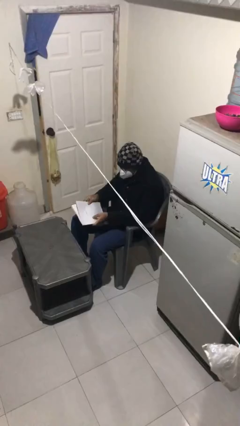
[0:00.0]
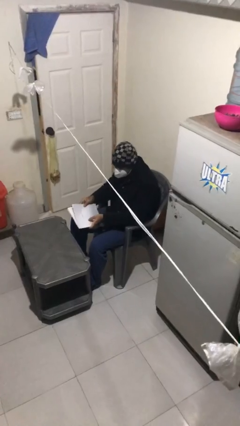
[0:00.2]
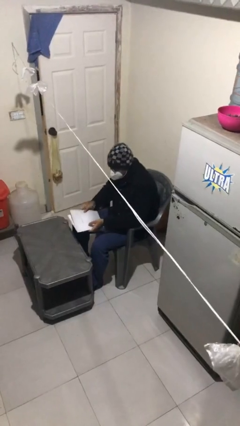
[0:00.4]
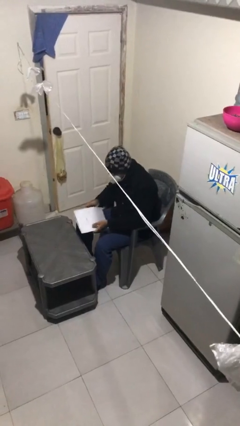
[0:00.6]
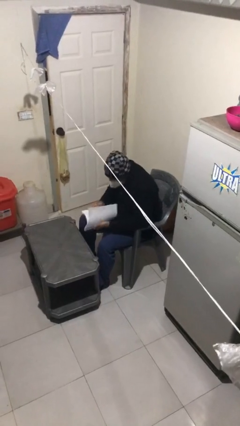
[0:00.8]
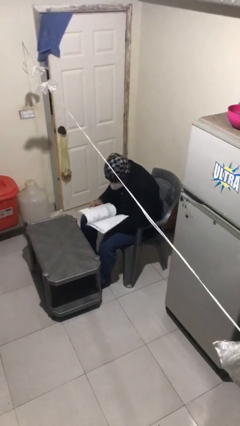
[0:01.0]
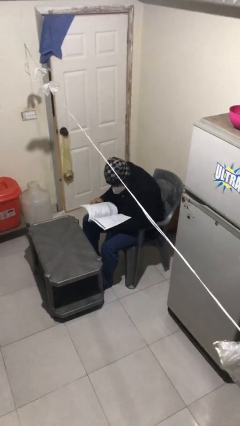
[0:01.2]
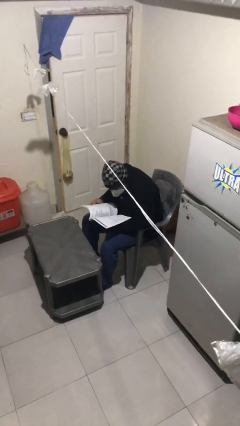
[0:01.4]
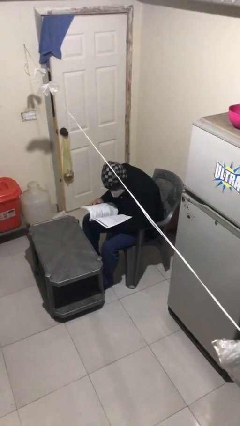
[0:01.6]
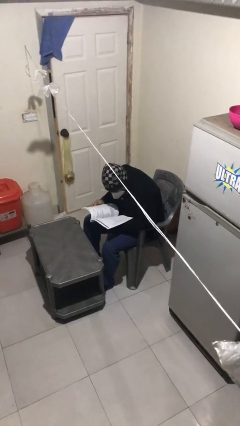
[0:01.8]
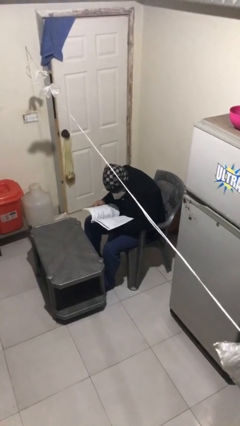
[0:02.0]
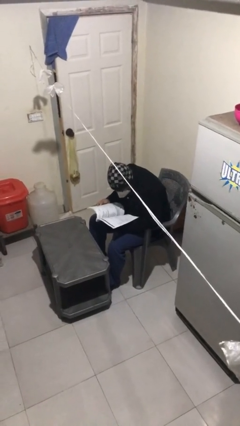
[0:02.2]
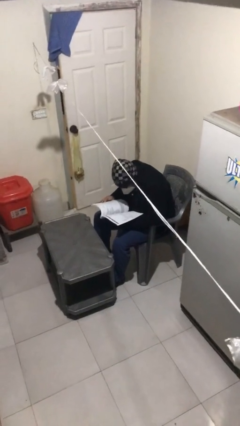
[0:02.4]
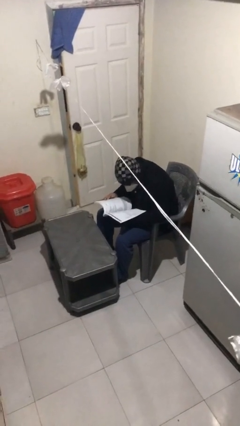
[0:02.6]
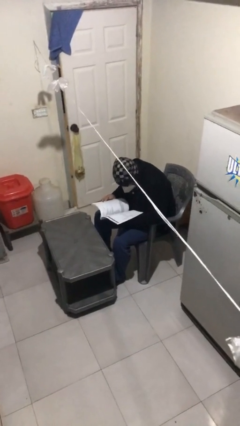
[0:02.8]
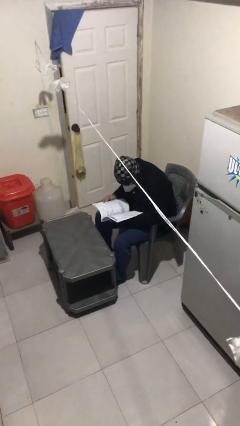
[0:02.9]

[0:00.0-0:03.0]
person reads document

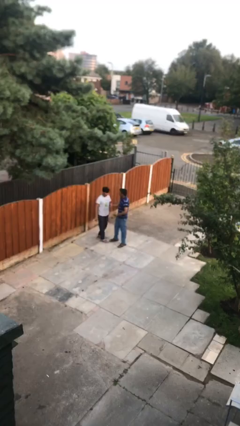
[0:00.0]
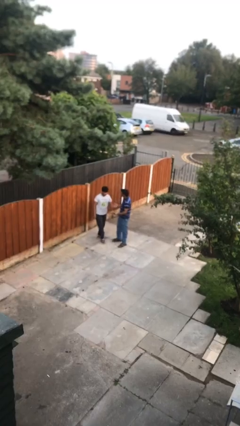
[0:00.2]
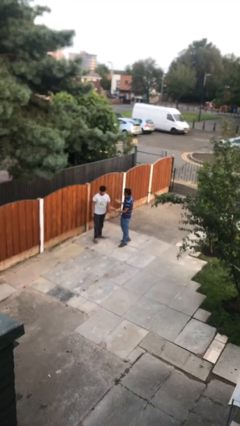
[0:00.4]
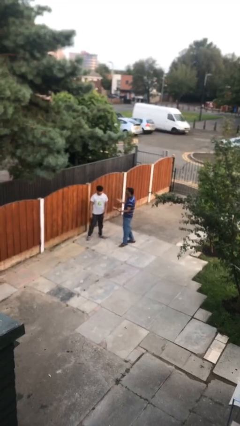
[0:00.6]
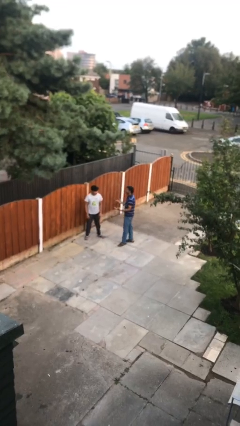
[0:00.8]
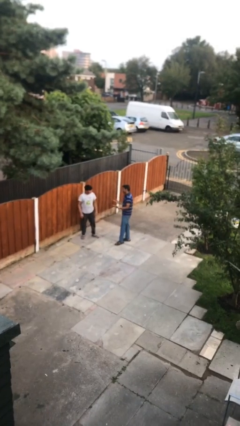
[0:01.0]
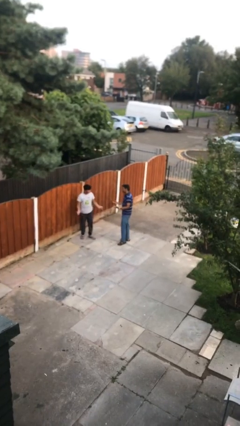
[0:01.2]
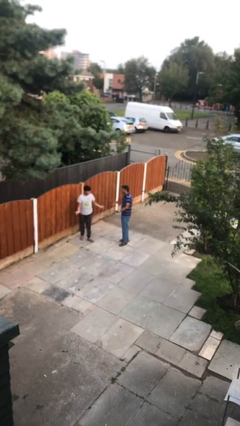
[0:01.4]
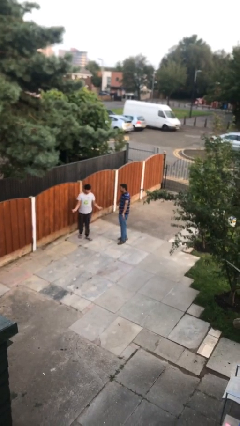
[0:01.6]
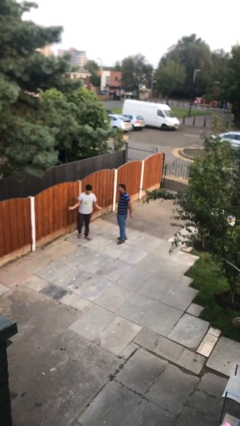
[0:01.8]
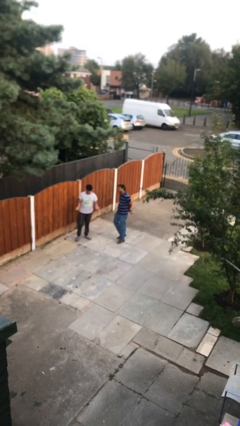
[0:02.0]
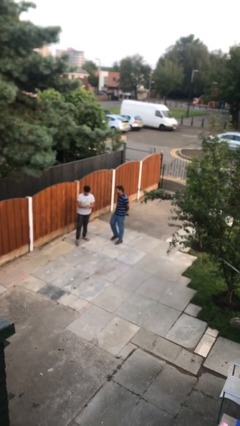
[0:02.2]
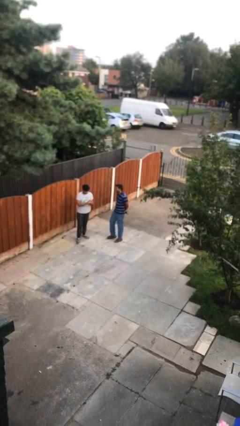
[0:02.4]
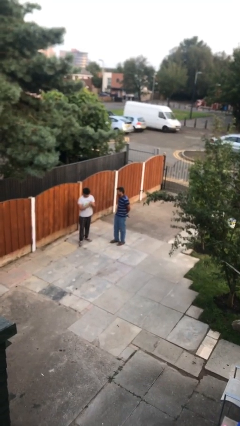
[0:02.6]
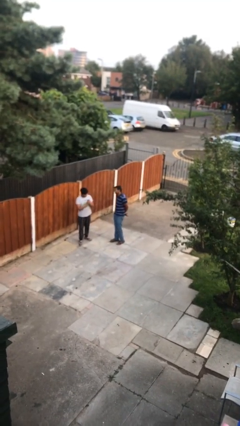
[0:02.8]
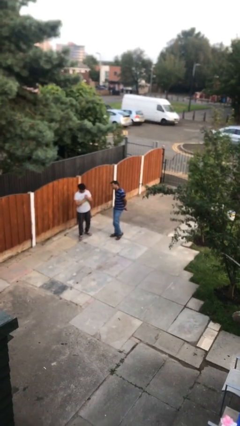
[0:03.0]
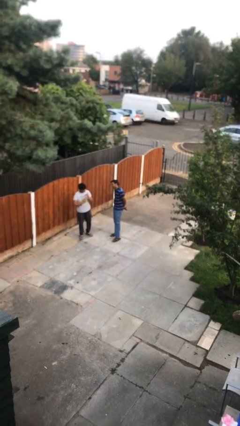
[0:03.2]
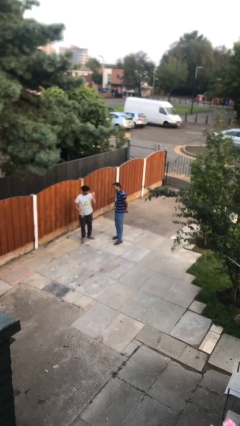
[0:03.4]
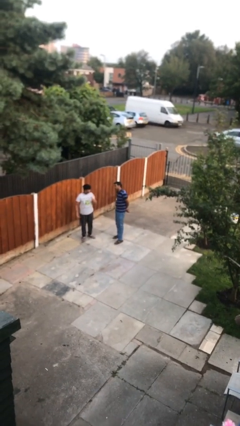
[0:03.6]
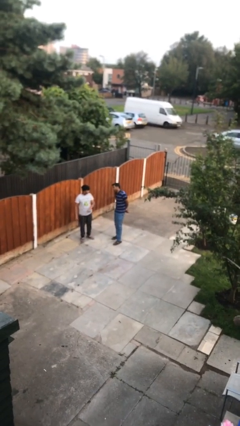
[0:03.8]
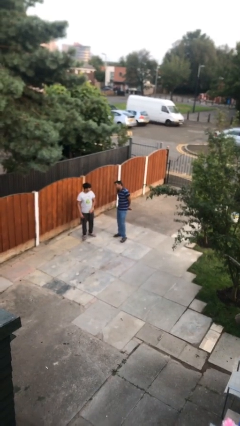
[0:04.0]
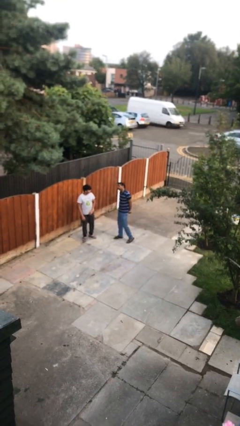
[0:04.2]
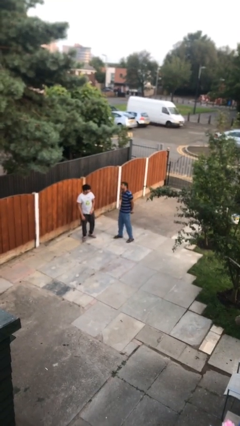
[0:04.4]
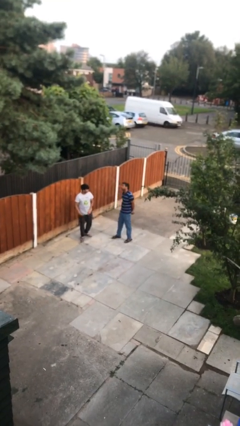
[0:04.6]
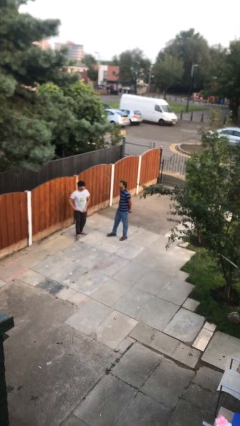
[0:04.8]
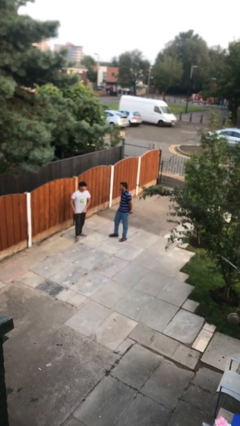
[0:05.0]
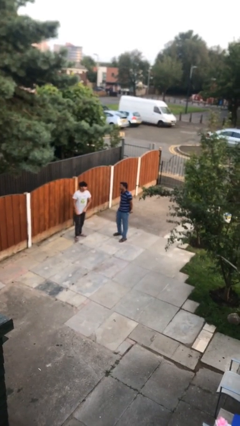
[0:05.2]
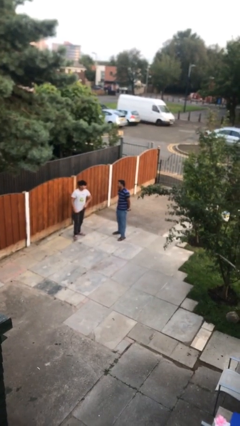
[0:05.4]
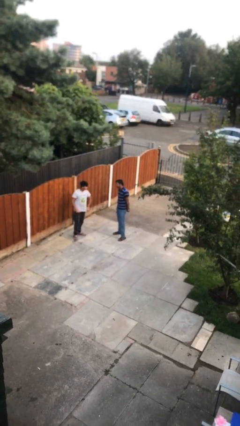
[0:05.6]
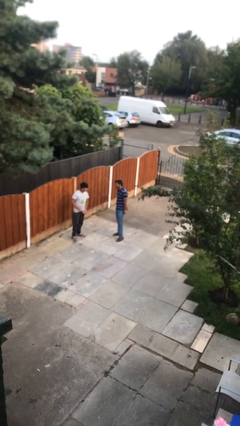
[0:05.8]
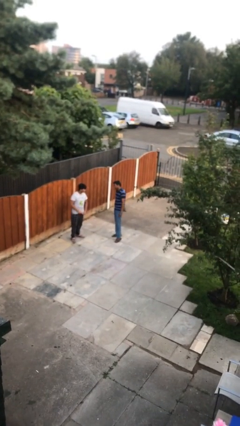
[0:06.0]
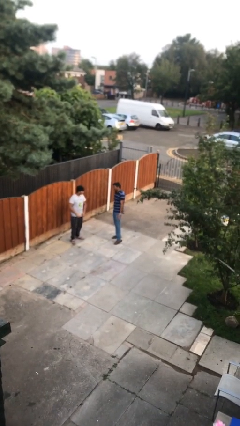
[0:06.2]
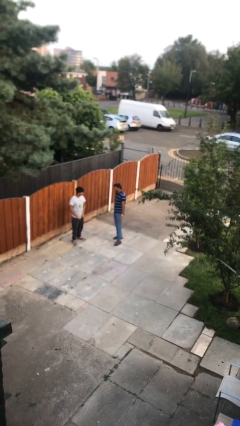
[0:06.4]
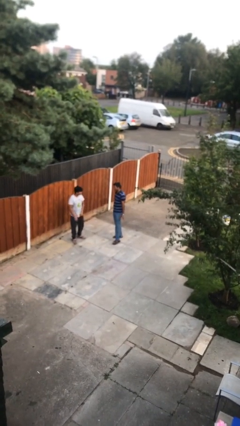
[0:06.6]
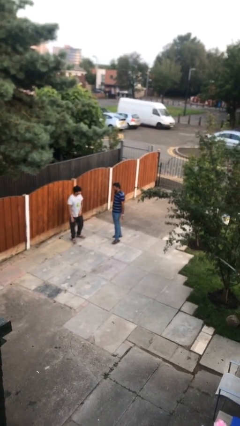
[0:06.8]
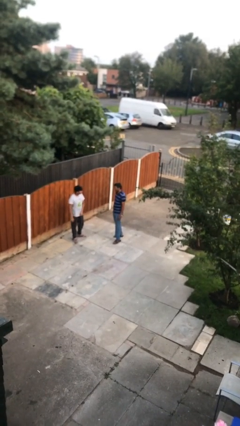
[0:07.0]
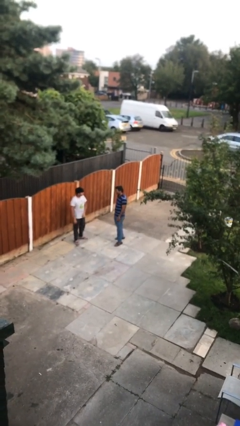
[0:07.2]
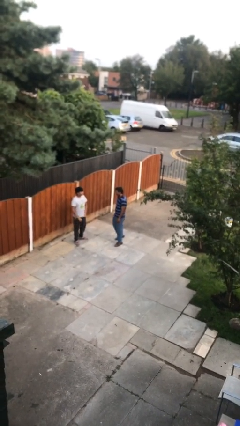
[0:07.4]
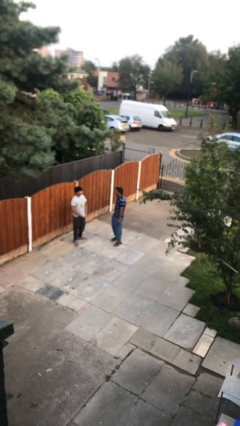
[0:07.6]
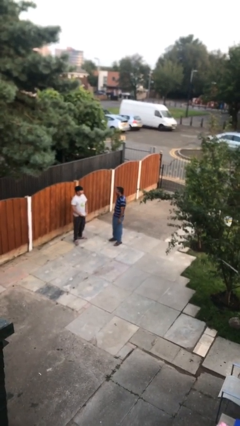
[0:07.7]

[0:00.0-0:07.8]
person talks to person

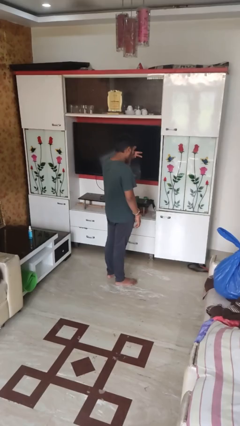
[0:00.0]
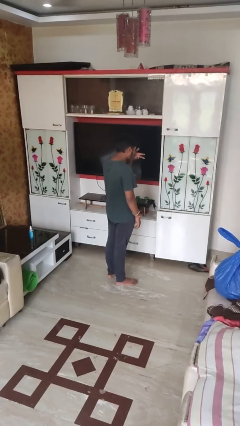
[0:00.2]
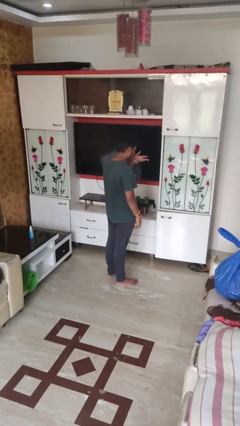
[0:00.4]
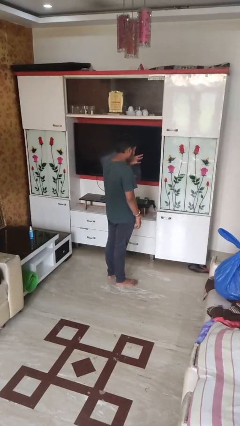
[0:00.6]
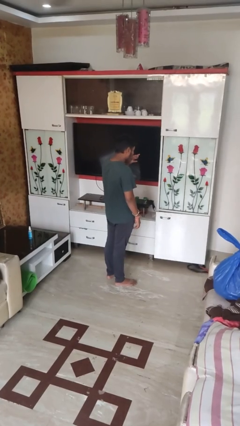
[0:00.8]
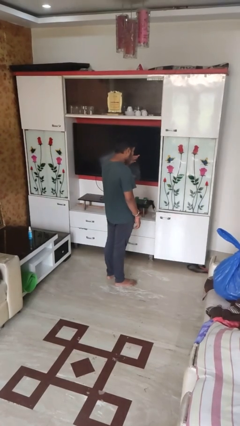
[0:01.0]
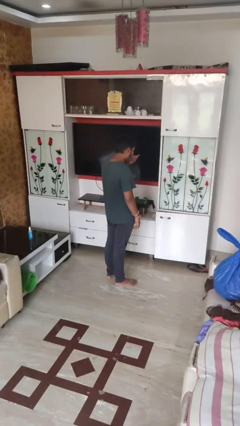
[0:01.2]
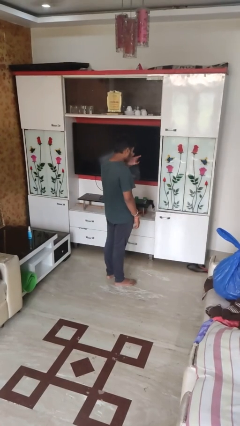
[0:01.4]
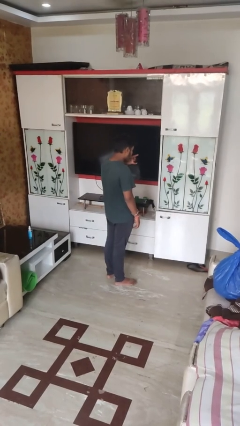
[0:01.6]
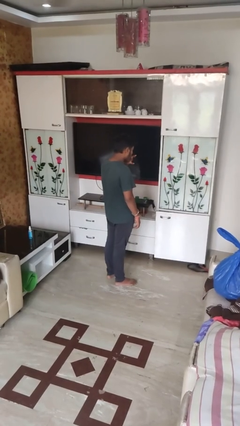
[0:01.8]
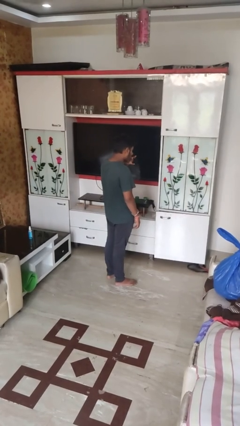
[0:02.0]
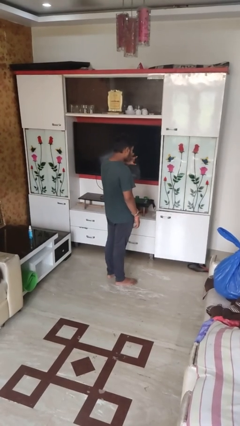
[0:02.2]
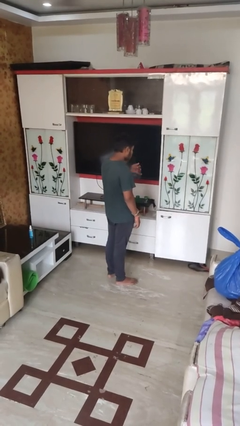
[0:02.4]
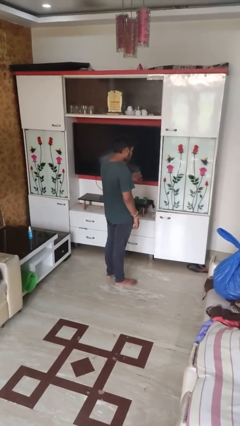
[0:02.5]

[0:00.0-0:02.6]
person licks fingers

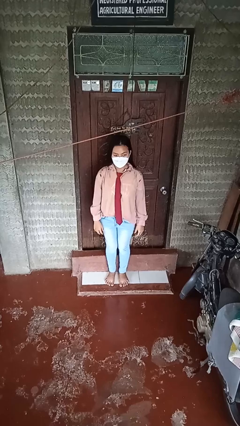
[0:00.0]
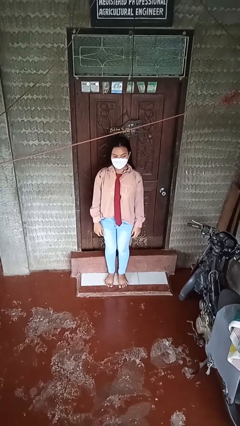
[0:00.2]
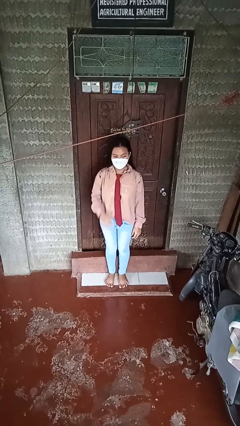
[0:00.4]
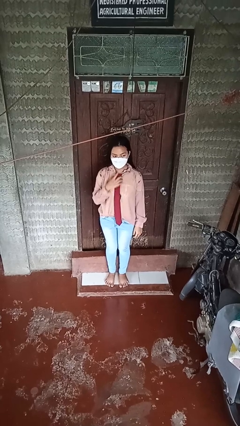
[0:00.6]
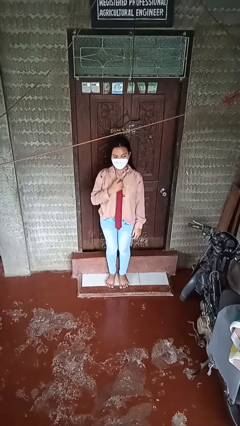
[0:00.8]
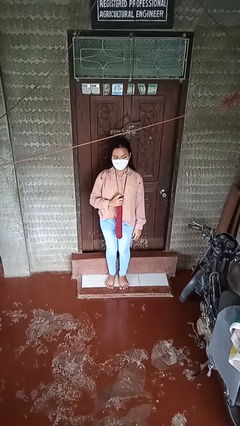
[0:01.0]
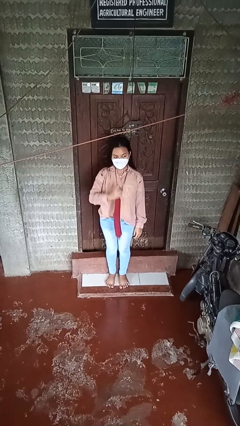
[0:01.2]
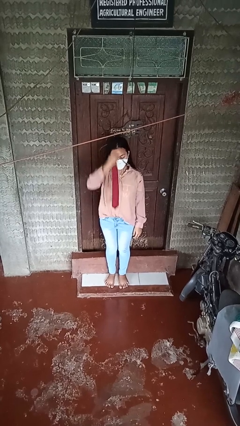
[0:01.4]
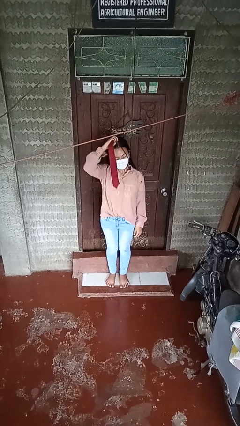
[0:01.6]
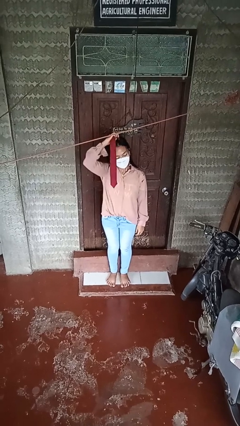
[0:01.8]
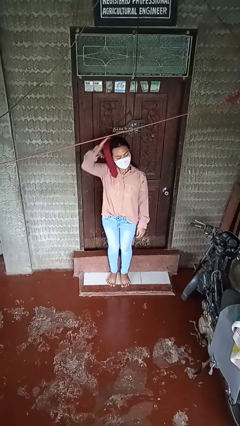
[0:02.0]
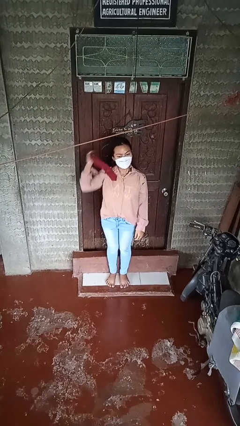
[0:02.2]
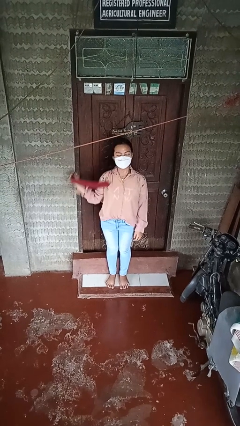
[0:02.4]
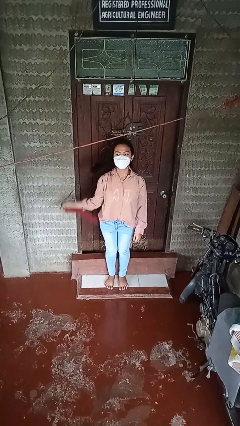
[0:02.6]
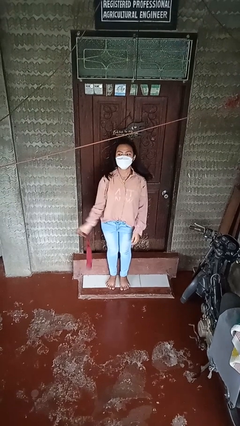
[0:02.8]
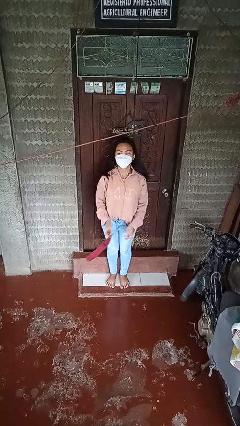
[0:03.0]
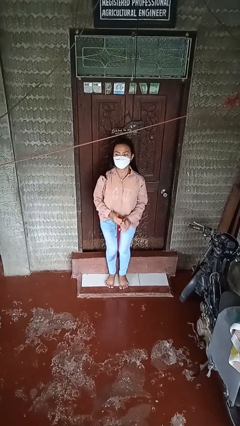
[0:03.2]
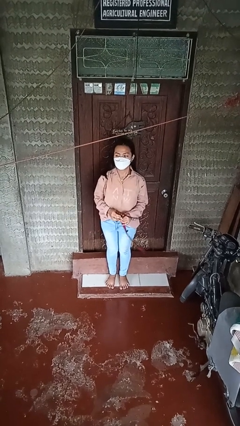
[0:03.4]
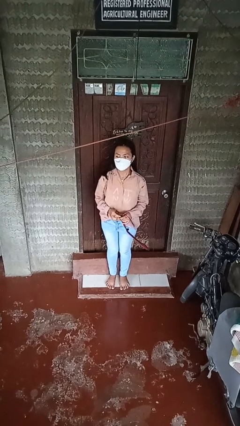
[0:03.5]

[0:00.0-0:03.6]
person takes off necktie

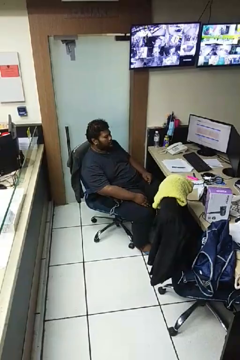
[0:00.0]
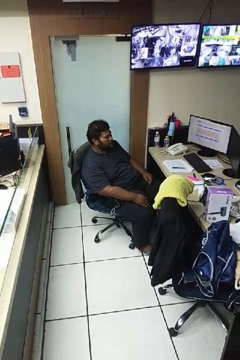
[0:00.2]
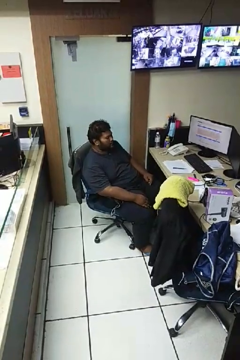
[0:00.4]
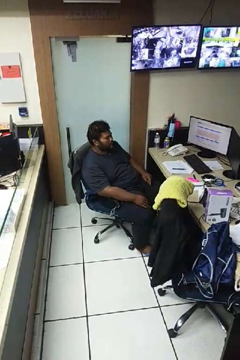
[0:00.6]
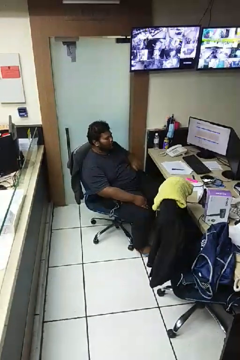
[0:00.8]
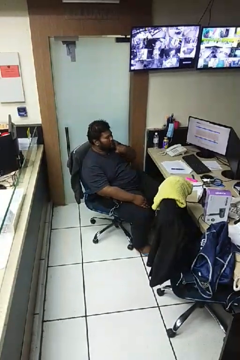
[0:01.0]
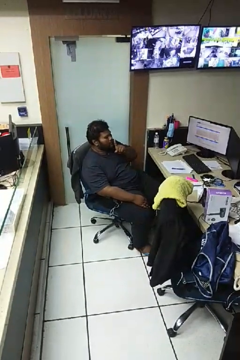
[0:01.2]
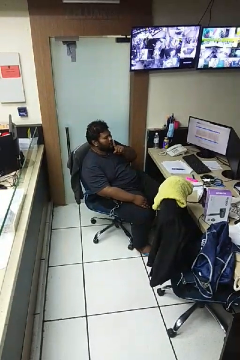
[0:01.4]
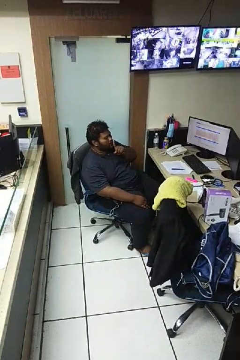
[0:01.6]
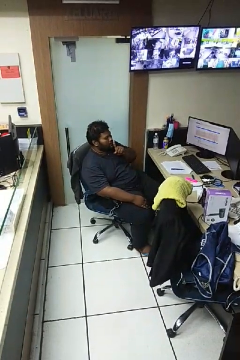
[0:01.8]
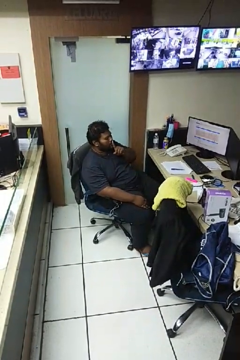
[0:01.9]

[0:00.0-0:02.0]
person gestures be quiet
